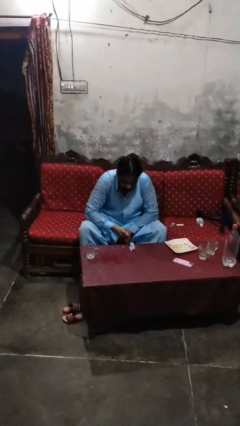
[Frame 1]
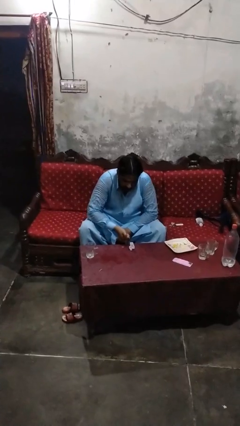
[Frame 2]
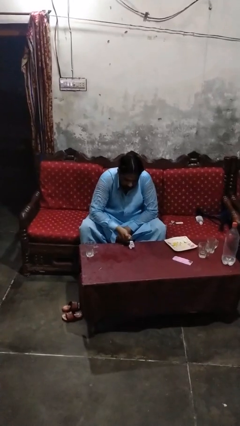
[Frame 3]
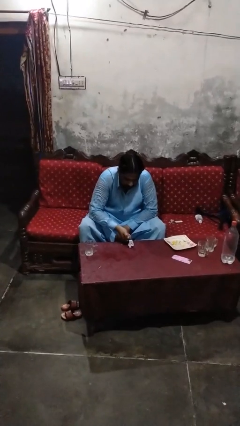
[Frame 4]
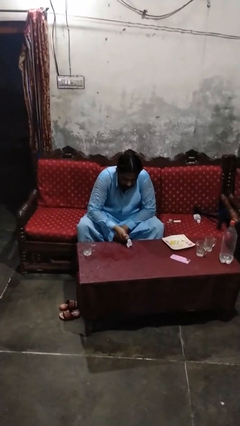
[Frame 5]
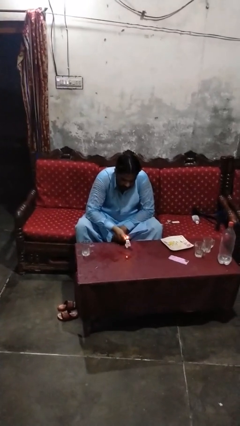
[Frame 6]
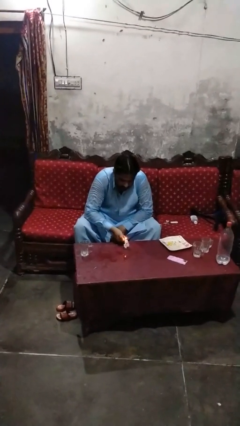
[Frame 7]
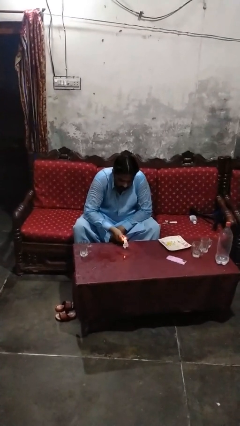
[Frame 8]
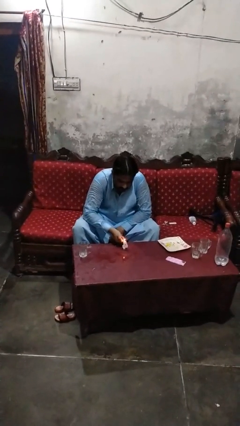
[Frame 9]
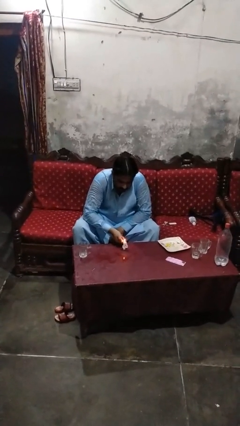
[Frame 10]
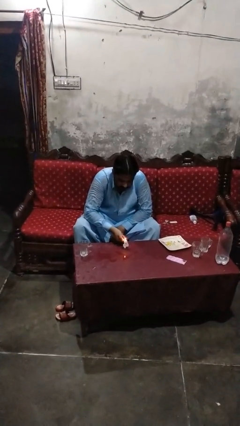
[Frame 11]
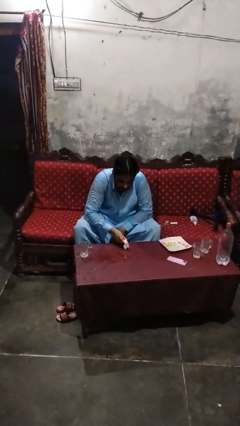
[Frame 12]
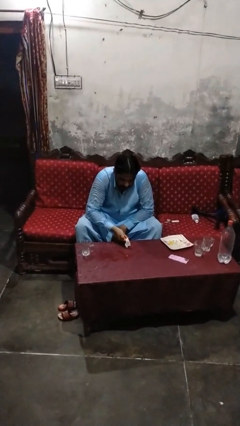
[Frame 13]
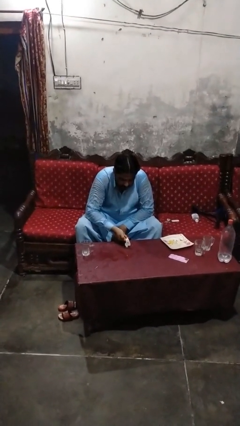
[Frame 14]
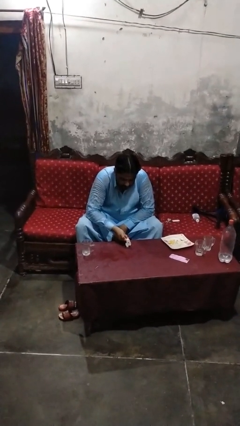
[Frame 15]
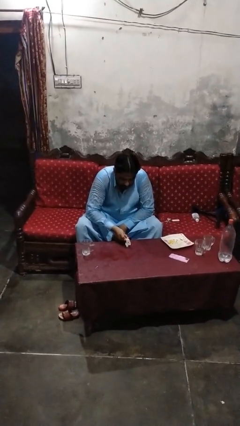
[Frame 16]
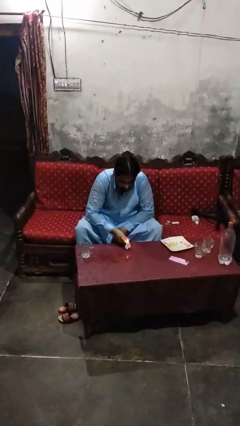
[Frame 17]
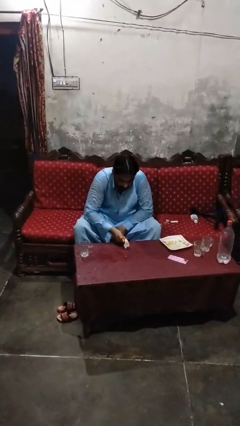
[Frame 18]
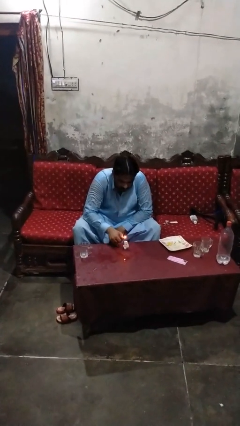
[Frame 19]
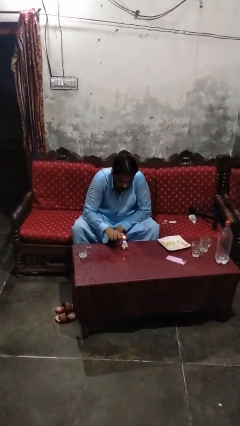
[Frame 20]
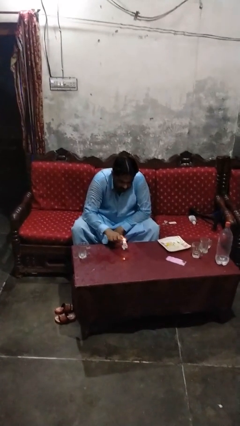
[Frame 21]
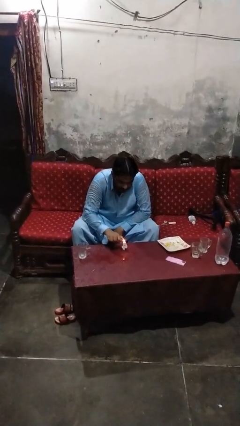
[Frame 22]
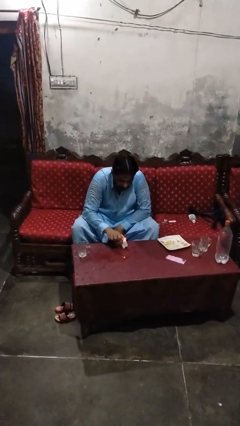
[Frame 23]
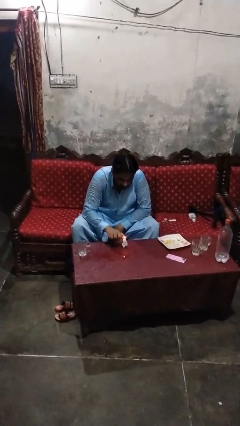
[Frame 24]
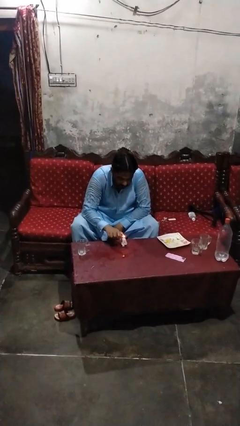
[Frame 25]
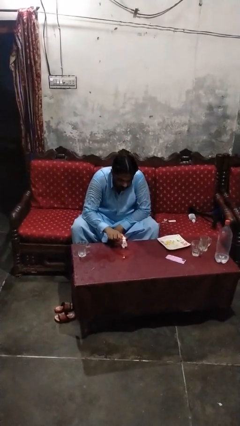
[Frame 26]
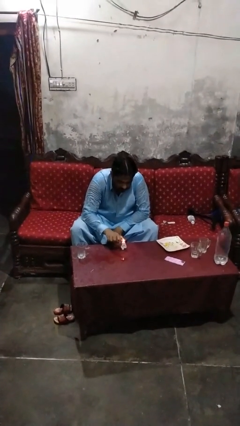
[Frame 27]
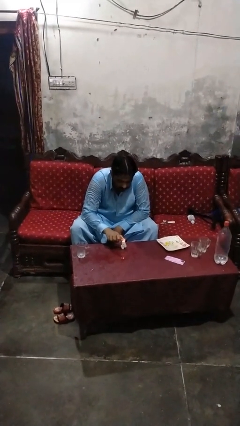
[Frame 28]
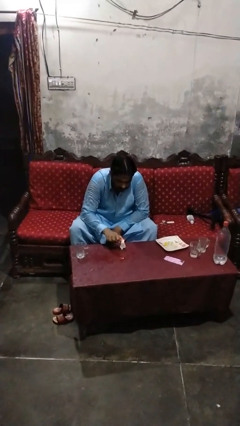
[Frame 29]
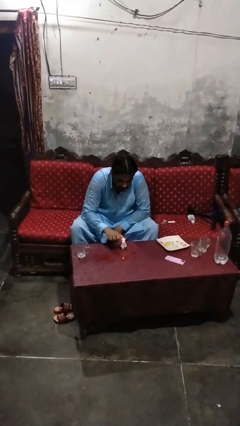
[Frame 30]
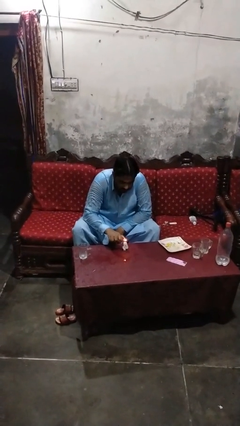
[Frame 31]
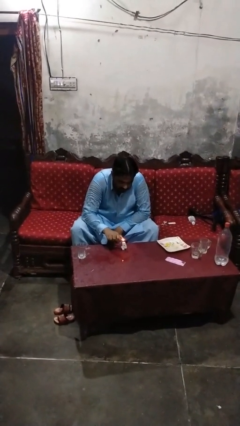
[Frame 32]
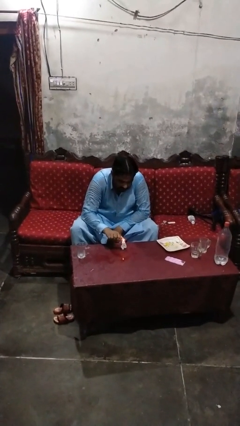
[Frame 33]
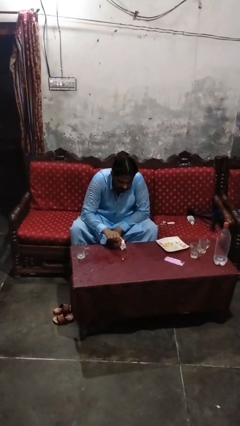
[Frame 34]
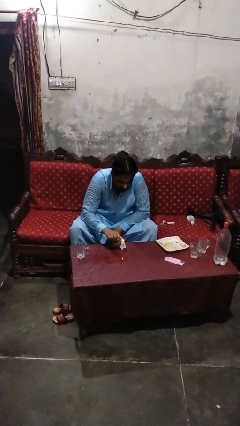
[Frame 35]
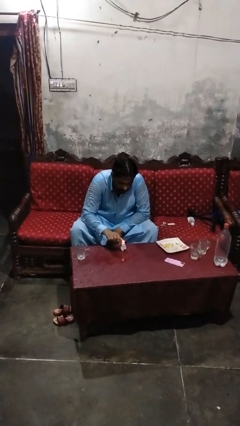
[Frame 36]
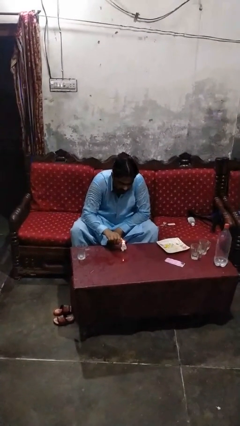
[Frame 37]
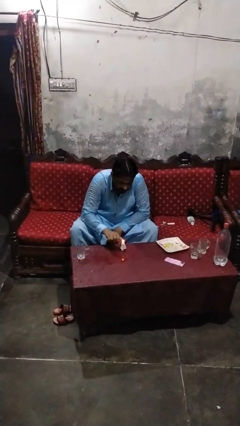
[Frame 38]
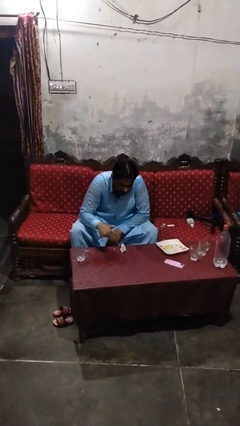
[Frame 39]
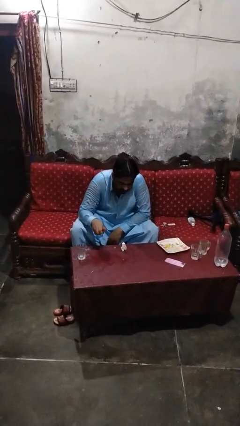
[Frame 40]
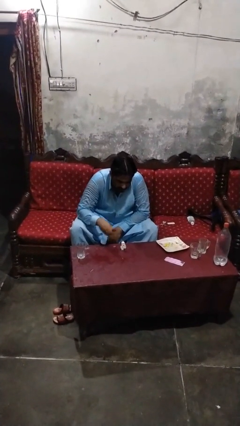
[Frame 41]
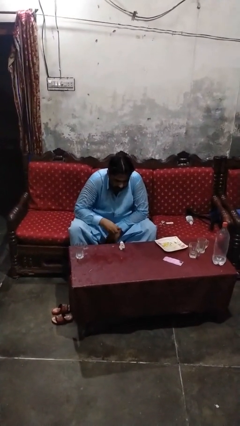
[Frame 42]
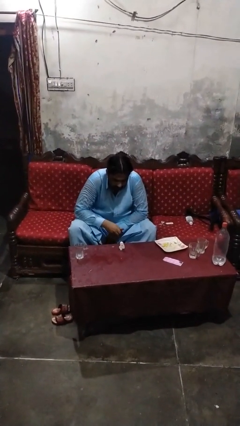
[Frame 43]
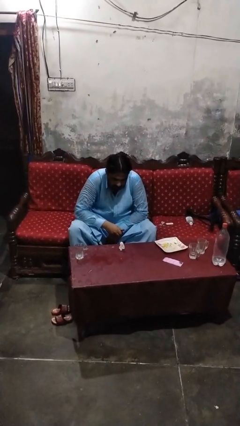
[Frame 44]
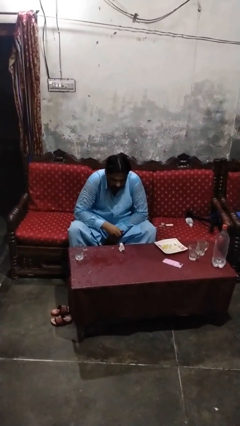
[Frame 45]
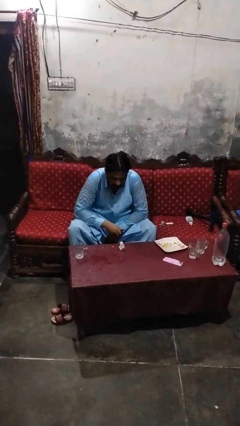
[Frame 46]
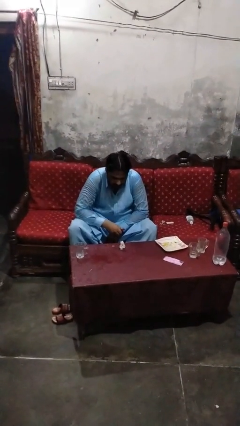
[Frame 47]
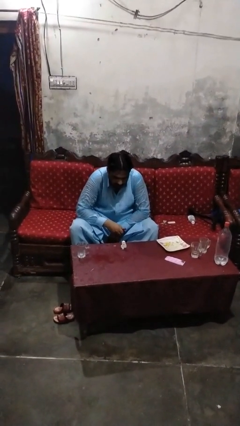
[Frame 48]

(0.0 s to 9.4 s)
person lights candle

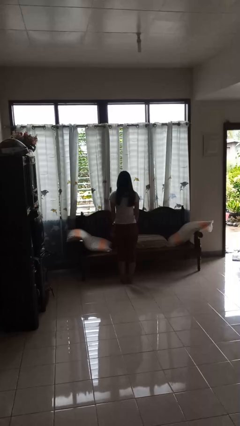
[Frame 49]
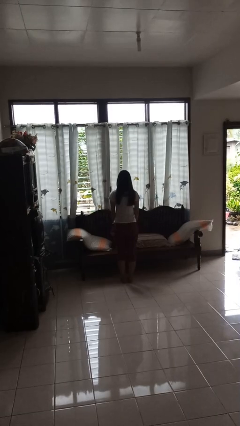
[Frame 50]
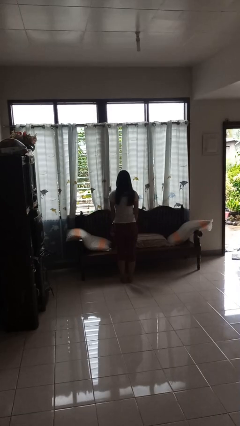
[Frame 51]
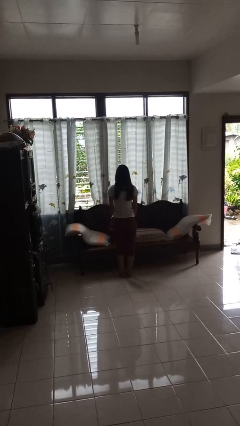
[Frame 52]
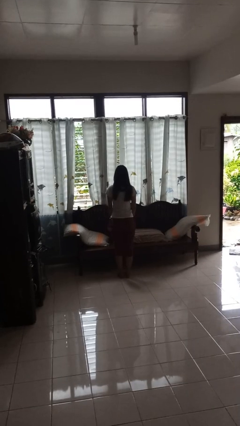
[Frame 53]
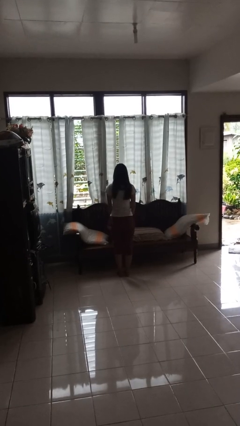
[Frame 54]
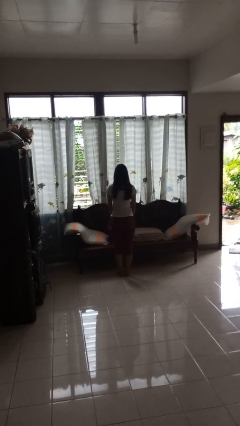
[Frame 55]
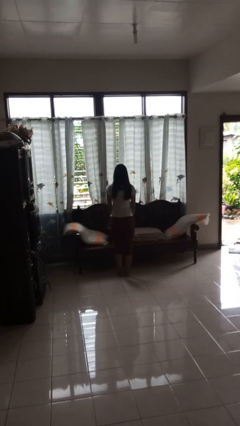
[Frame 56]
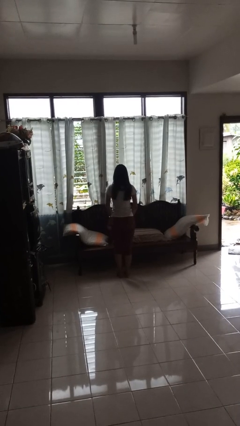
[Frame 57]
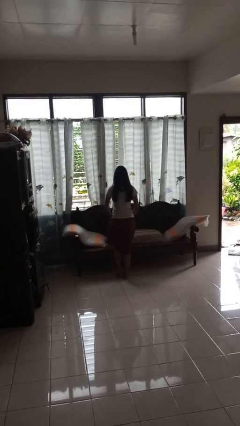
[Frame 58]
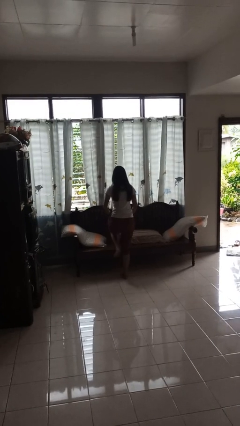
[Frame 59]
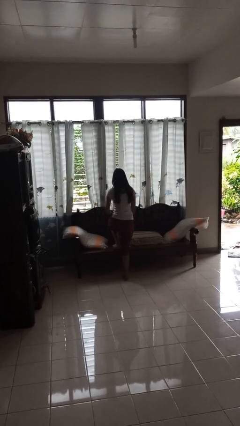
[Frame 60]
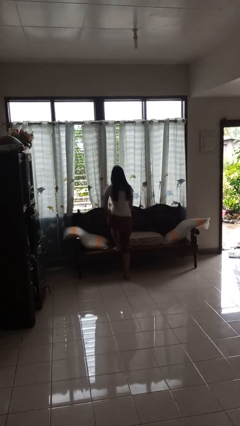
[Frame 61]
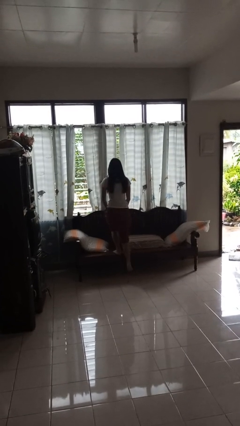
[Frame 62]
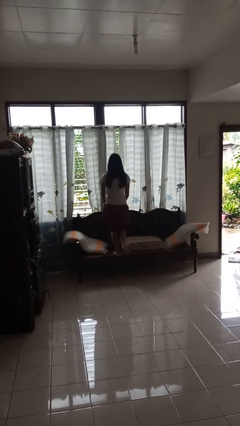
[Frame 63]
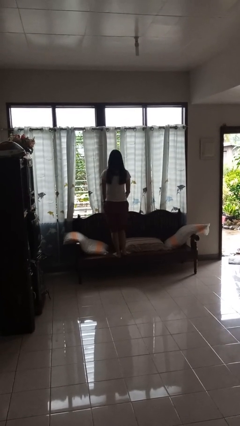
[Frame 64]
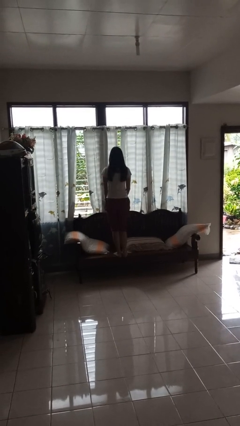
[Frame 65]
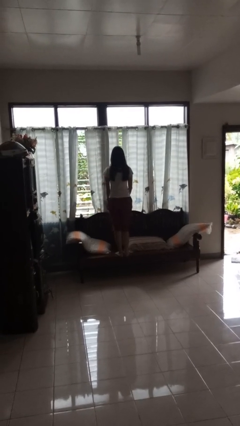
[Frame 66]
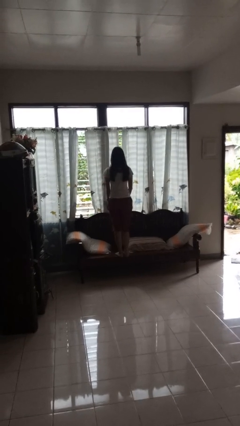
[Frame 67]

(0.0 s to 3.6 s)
person climbs on couch

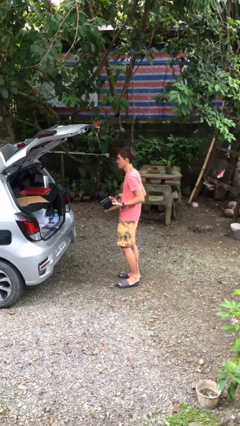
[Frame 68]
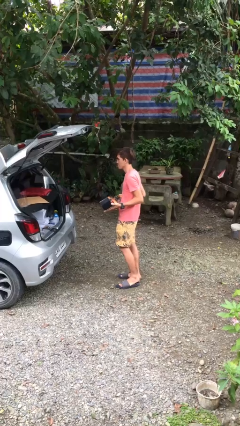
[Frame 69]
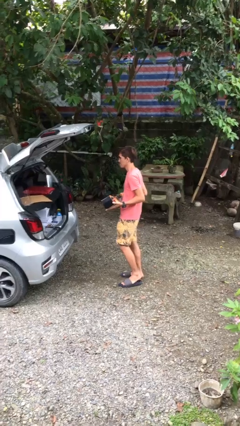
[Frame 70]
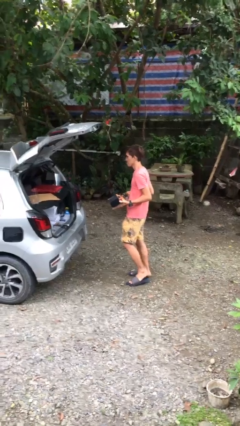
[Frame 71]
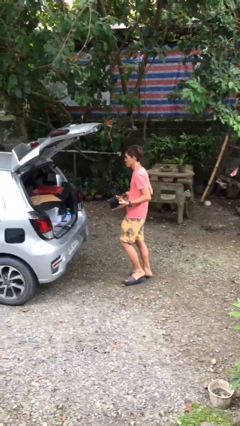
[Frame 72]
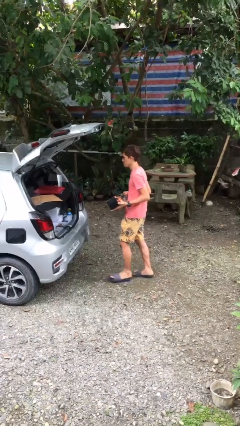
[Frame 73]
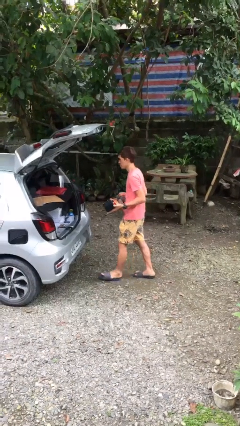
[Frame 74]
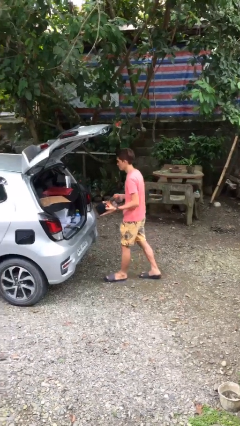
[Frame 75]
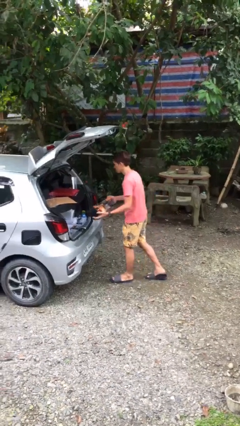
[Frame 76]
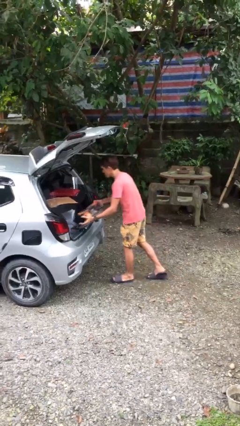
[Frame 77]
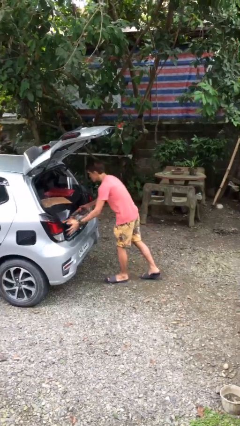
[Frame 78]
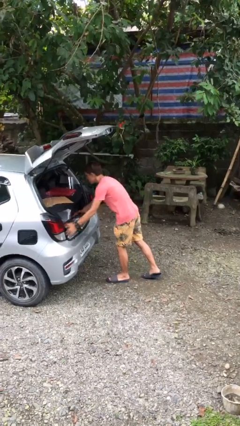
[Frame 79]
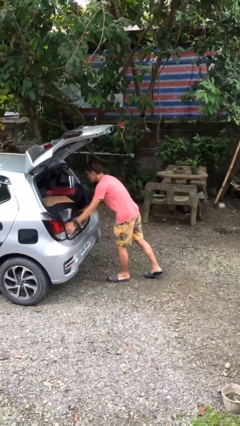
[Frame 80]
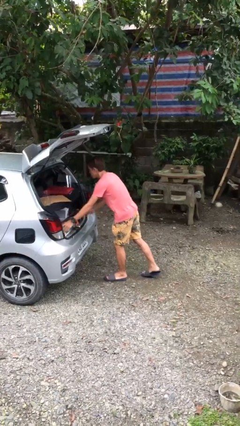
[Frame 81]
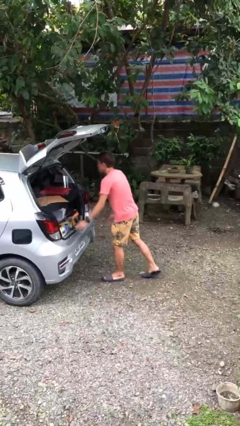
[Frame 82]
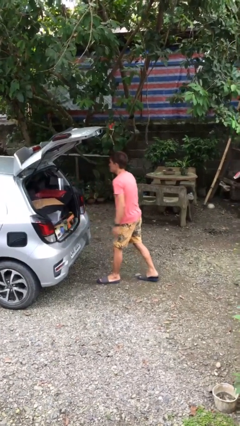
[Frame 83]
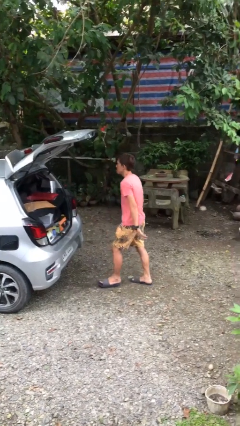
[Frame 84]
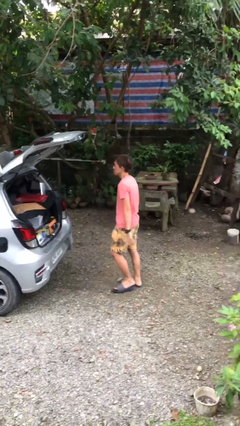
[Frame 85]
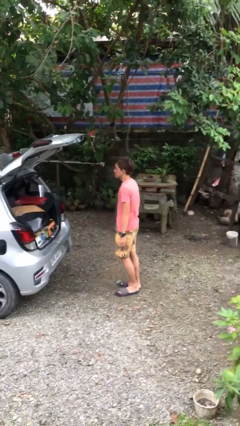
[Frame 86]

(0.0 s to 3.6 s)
person loads car

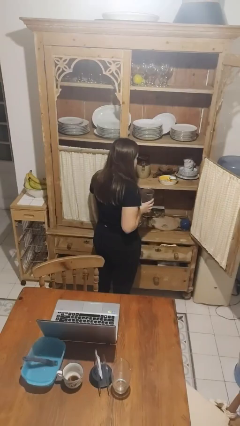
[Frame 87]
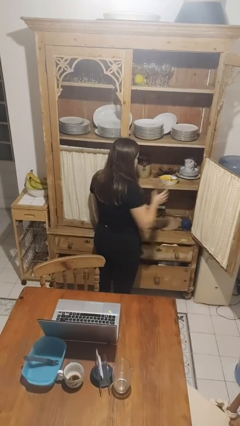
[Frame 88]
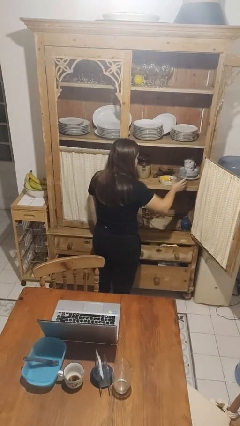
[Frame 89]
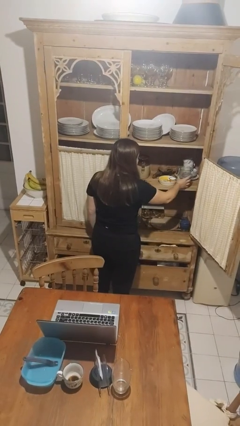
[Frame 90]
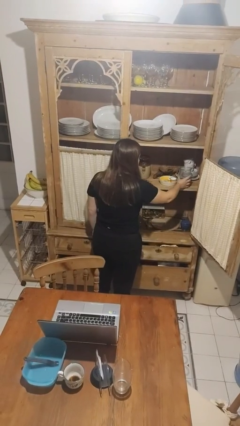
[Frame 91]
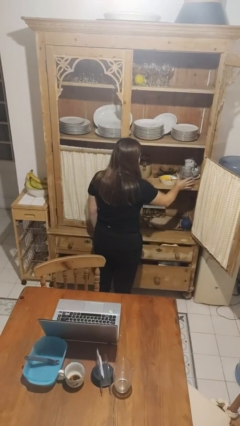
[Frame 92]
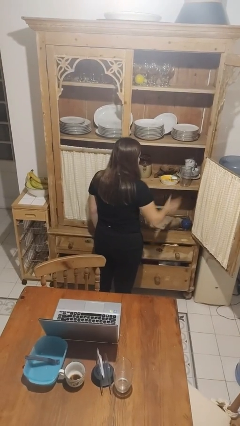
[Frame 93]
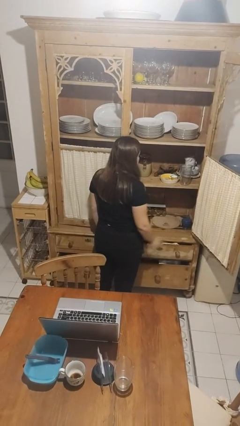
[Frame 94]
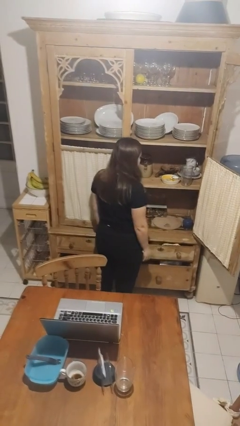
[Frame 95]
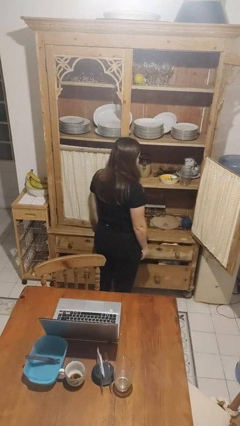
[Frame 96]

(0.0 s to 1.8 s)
person puts object in cabinet
